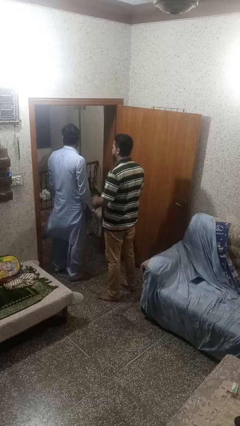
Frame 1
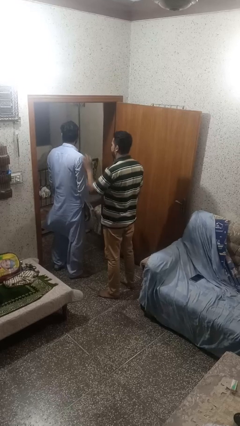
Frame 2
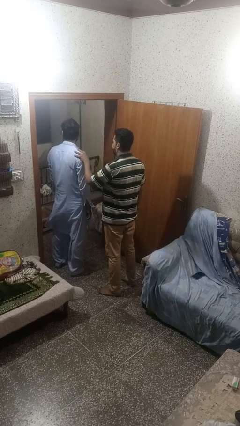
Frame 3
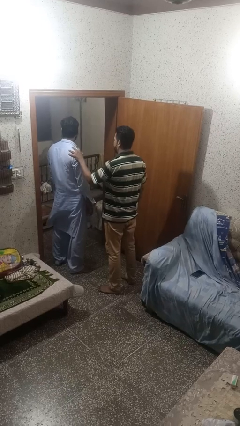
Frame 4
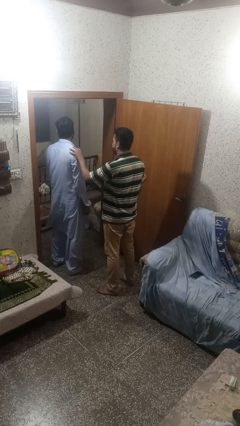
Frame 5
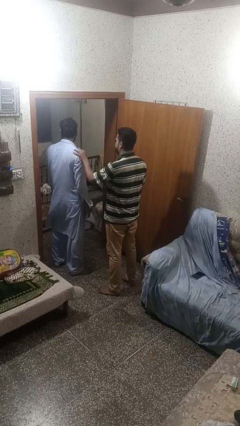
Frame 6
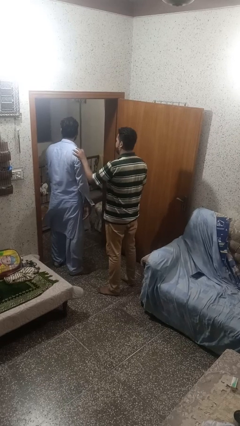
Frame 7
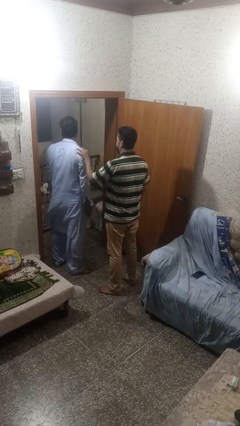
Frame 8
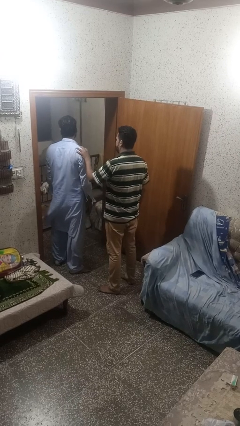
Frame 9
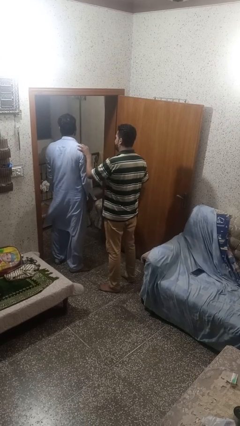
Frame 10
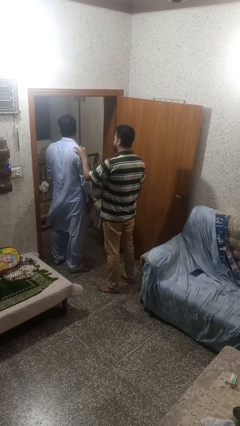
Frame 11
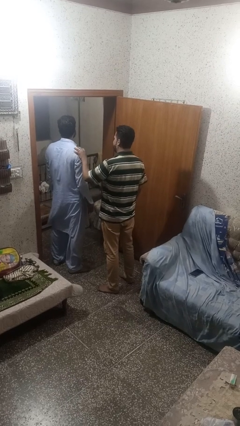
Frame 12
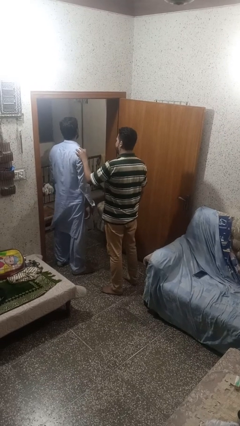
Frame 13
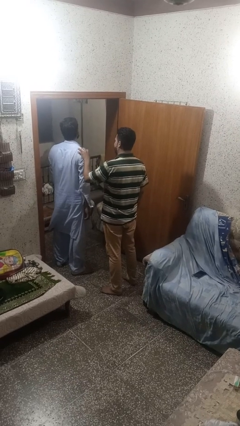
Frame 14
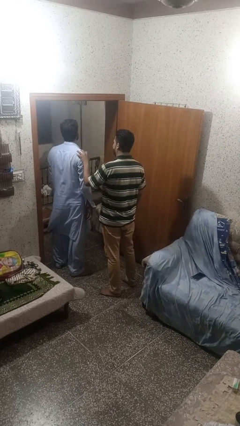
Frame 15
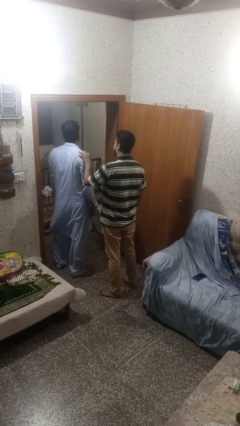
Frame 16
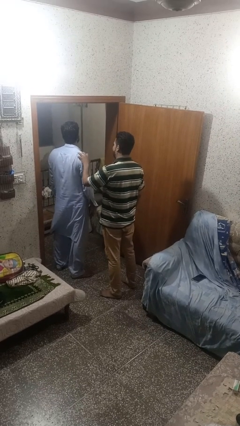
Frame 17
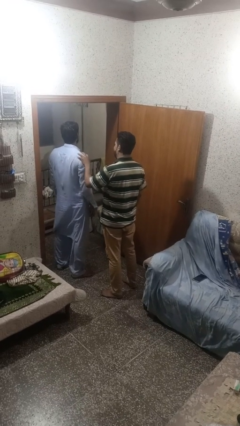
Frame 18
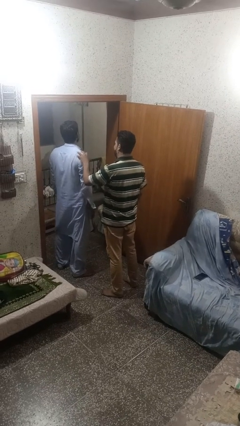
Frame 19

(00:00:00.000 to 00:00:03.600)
person grabs person by shoulder

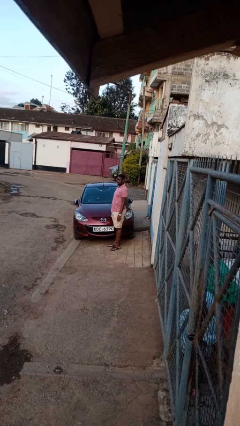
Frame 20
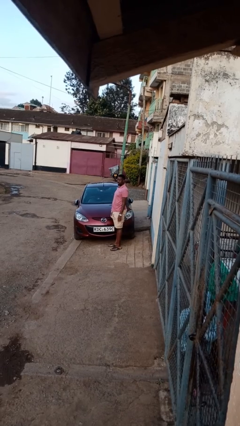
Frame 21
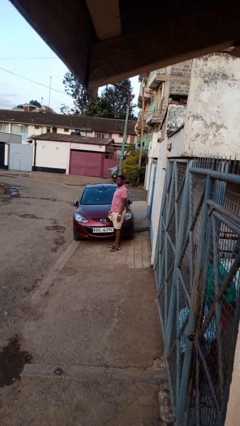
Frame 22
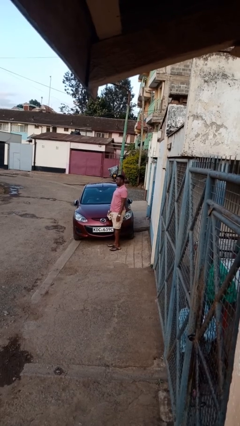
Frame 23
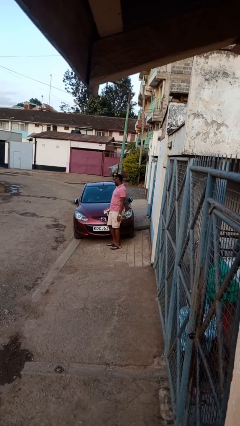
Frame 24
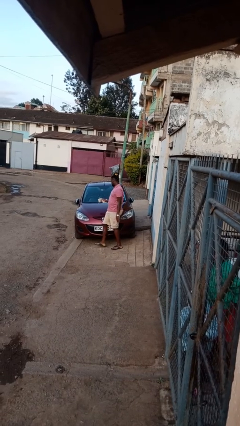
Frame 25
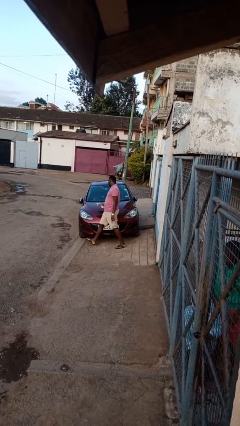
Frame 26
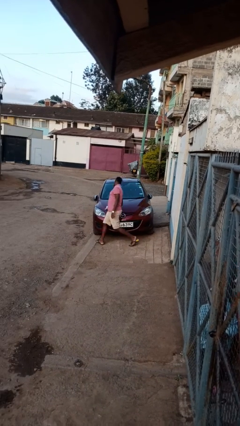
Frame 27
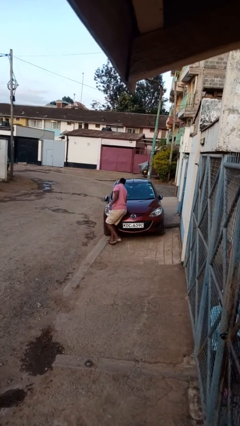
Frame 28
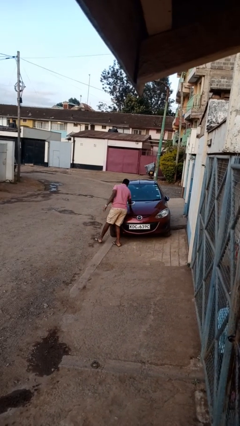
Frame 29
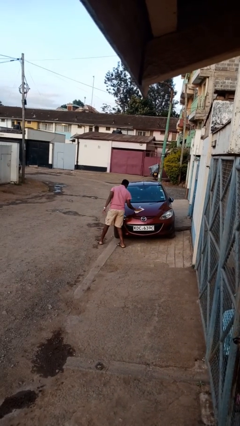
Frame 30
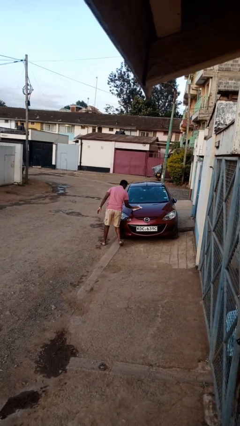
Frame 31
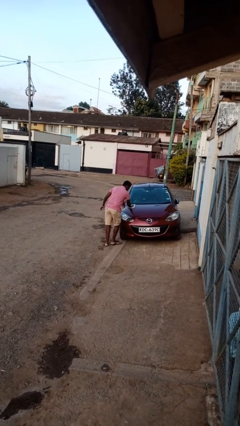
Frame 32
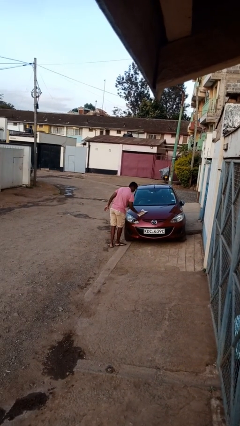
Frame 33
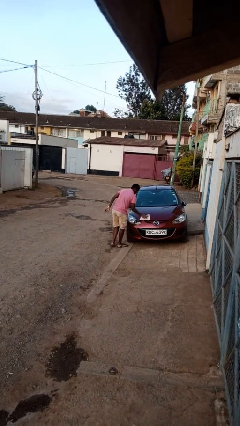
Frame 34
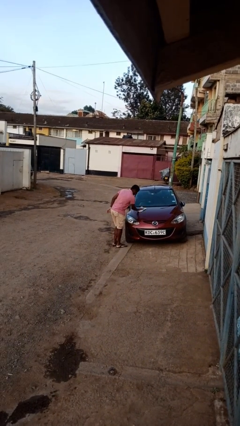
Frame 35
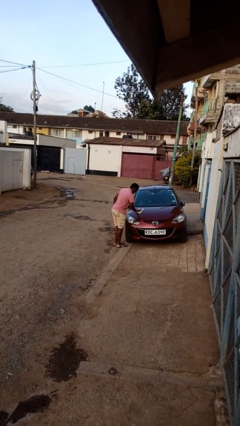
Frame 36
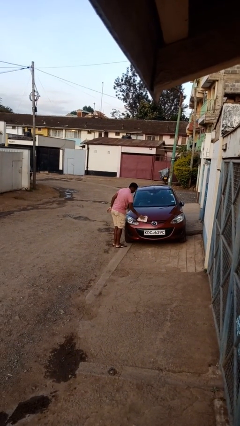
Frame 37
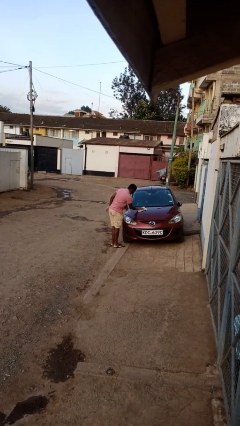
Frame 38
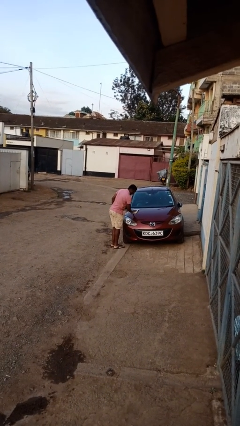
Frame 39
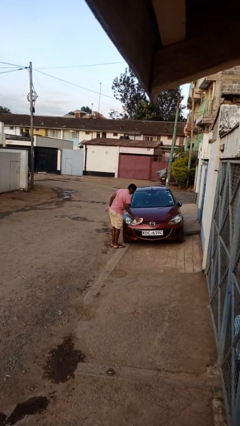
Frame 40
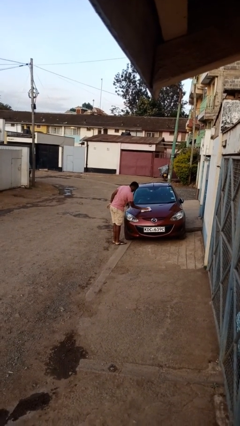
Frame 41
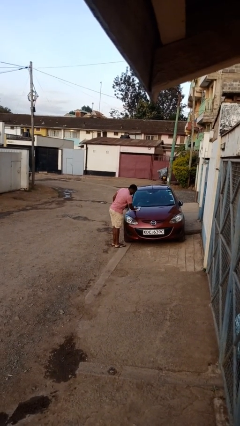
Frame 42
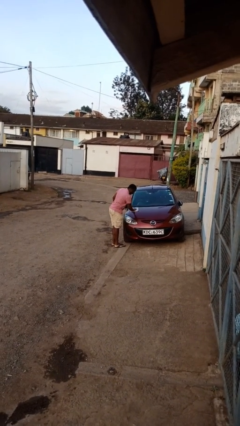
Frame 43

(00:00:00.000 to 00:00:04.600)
person polishes car with rag

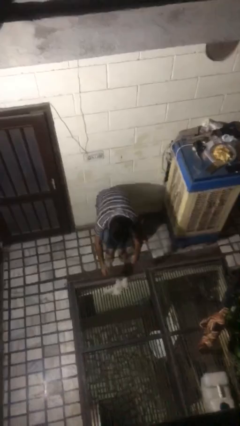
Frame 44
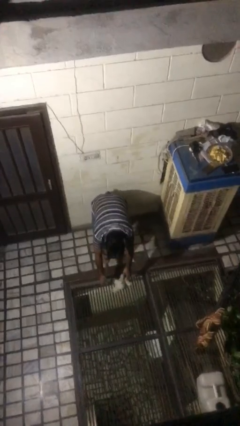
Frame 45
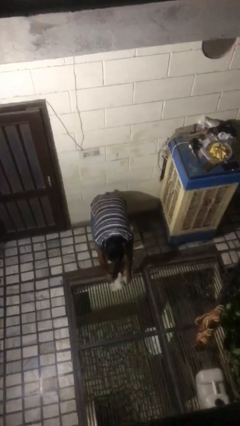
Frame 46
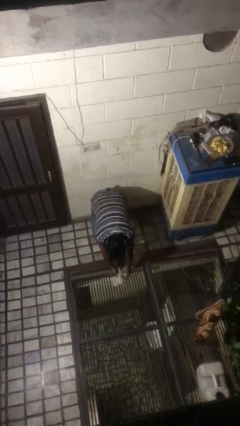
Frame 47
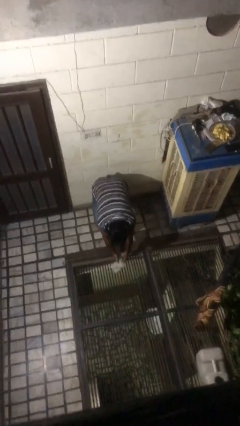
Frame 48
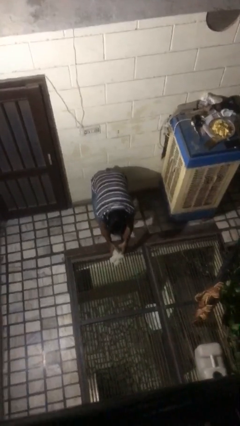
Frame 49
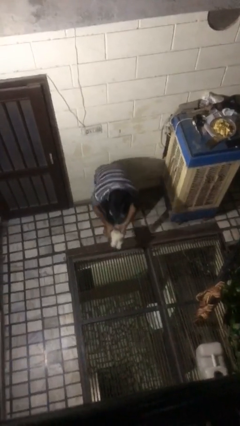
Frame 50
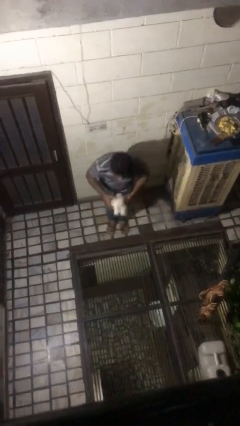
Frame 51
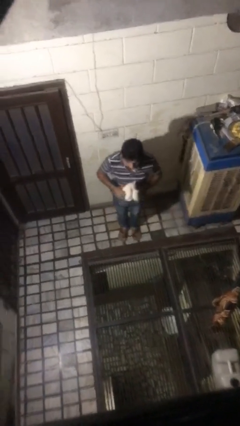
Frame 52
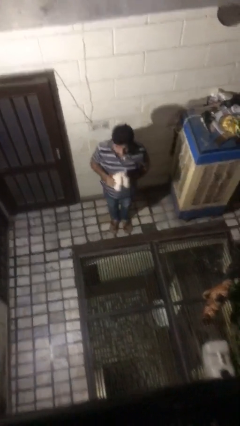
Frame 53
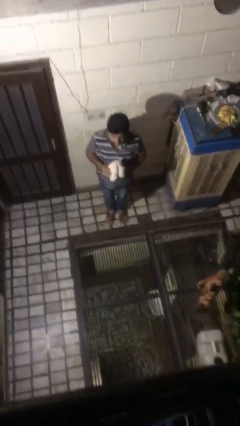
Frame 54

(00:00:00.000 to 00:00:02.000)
person picks up object from floor

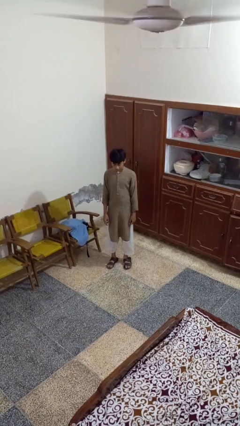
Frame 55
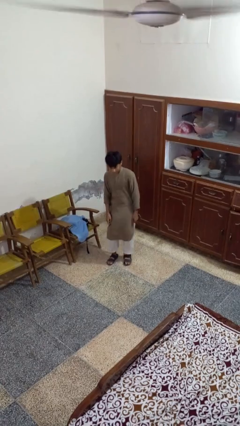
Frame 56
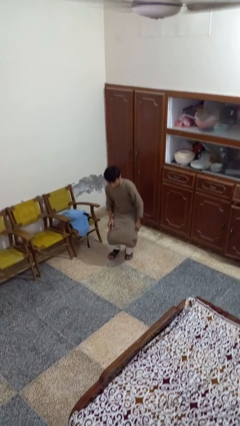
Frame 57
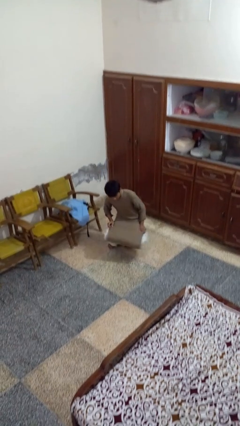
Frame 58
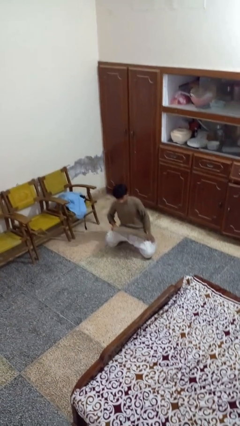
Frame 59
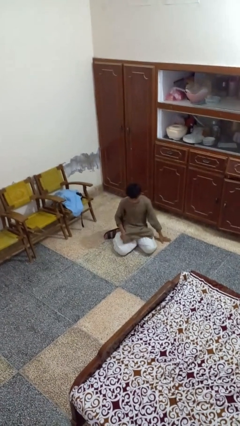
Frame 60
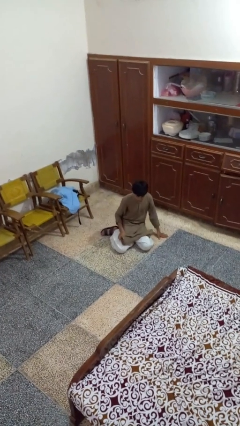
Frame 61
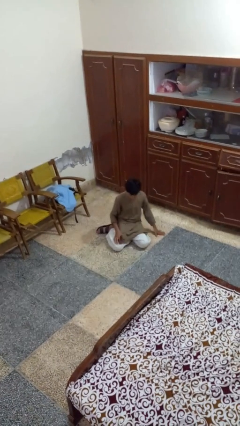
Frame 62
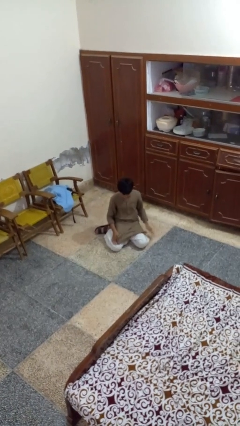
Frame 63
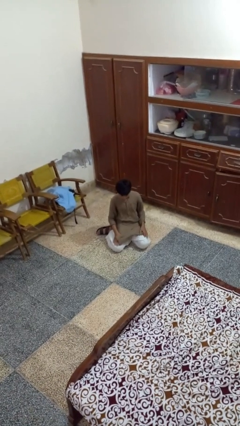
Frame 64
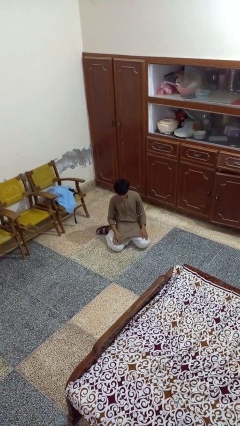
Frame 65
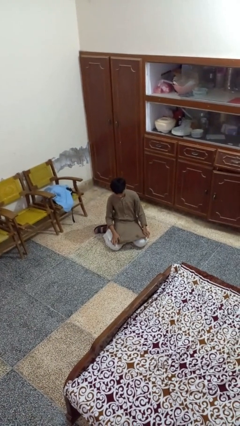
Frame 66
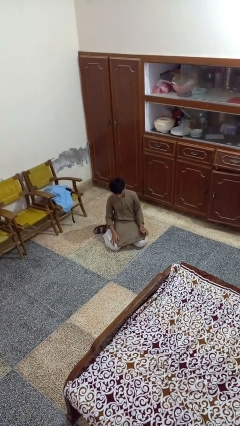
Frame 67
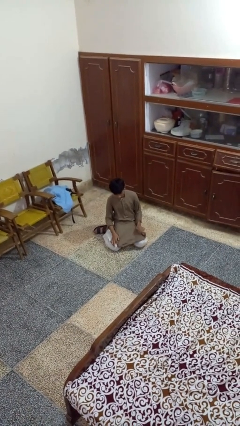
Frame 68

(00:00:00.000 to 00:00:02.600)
person falls while standing

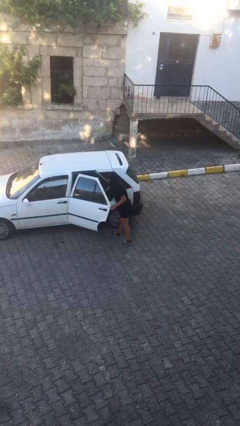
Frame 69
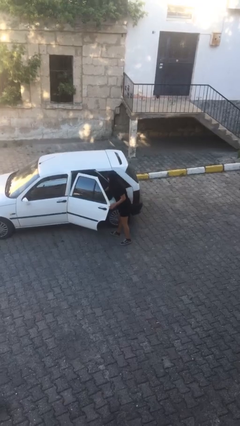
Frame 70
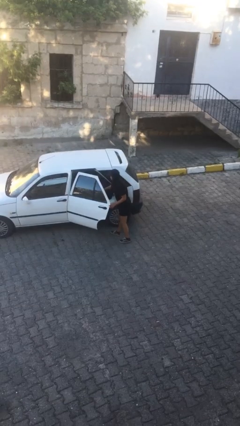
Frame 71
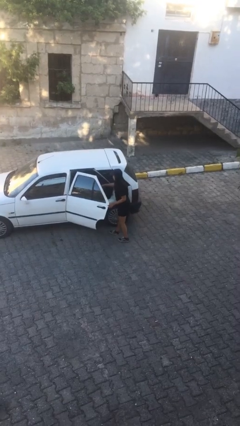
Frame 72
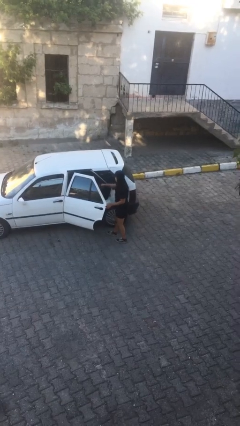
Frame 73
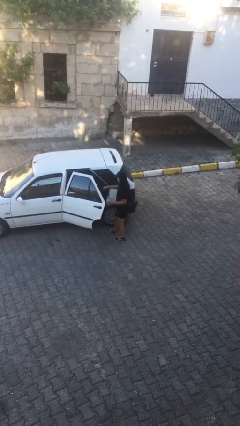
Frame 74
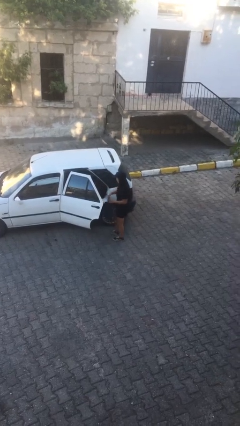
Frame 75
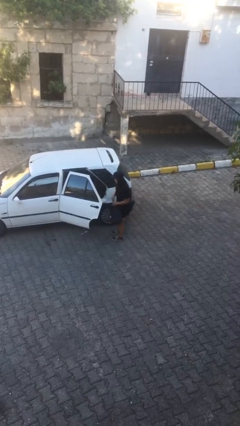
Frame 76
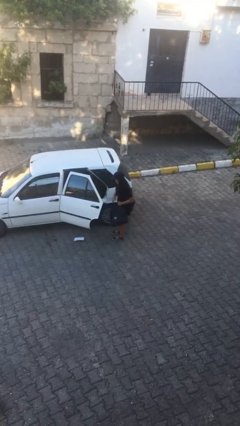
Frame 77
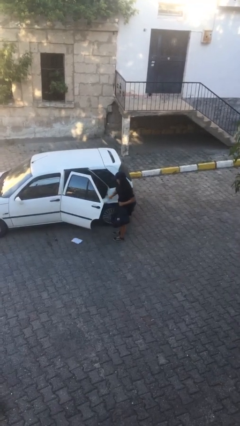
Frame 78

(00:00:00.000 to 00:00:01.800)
person unloads car

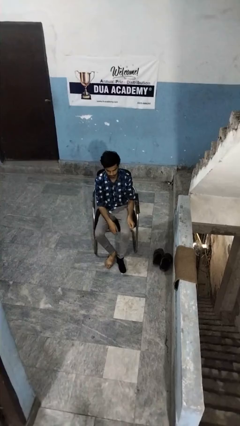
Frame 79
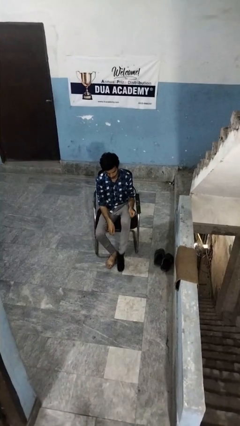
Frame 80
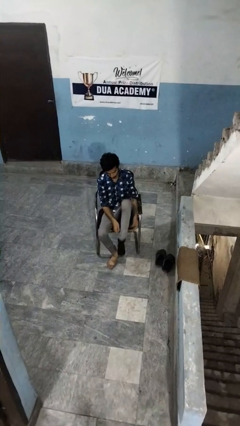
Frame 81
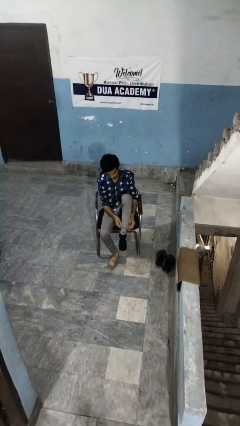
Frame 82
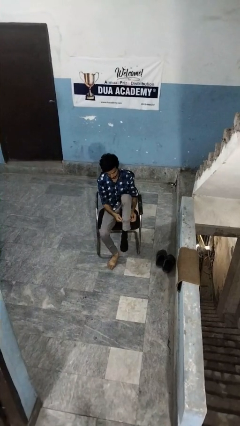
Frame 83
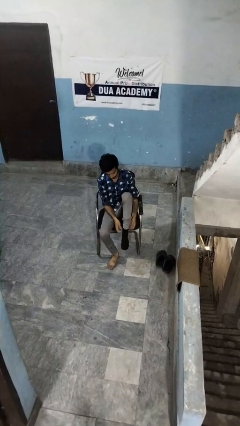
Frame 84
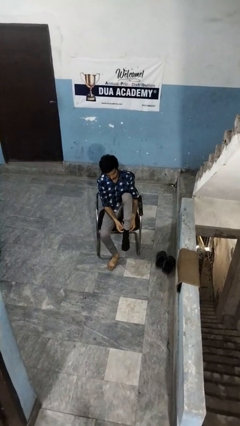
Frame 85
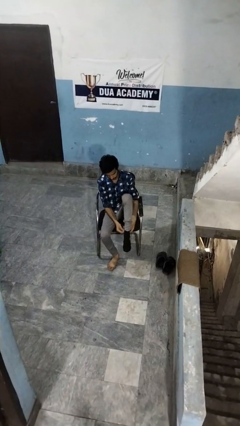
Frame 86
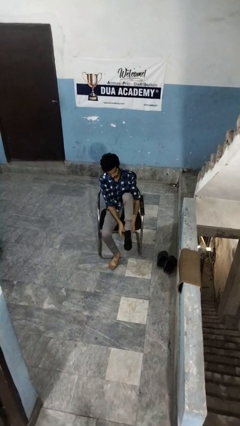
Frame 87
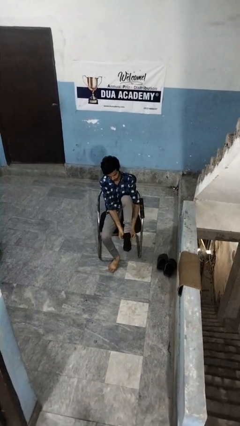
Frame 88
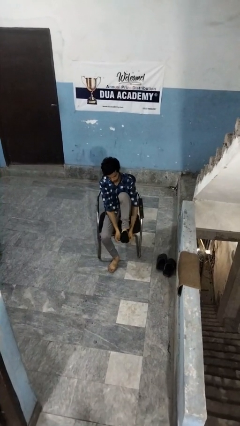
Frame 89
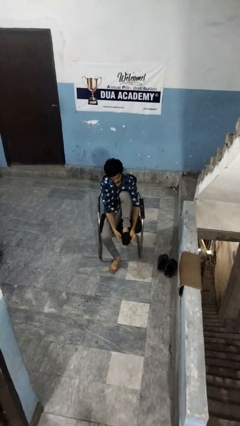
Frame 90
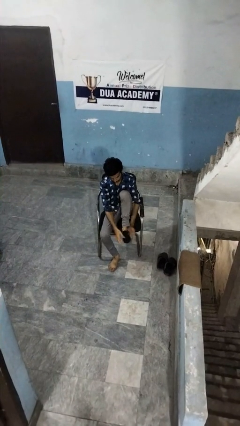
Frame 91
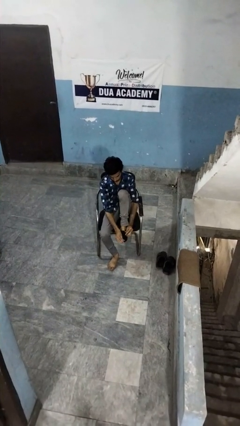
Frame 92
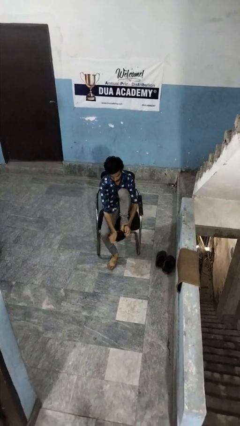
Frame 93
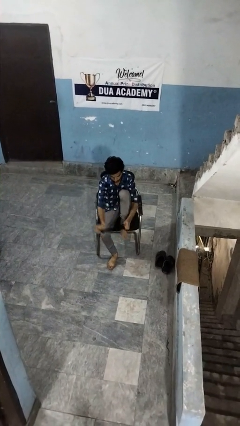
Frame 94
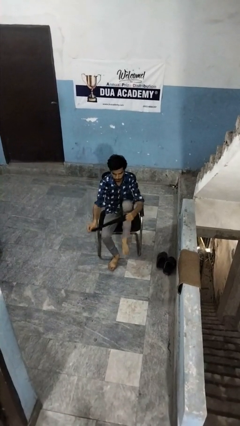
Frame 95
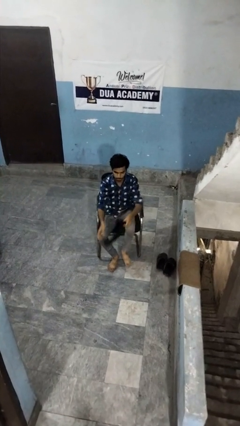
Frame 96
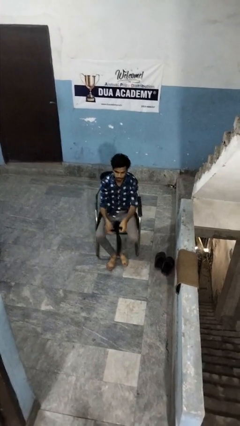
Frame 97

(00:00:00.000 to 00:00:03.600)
person takes off socks
